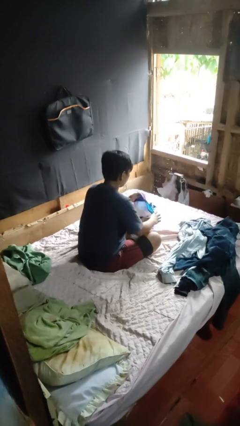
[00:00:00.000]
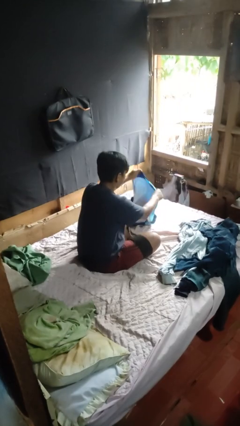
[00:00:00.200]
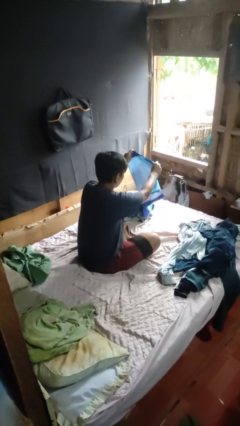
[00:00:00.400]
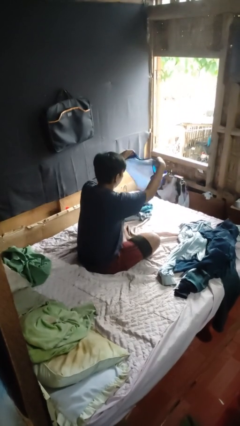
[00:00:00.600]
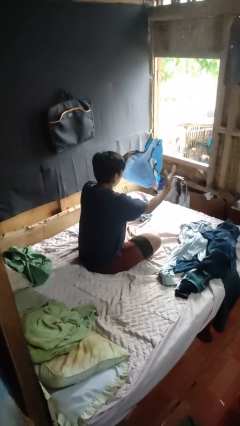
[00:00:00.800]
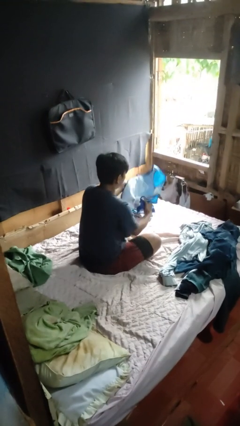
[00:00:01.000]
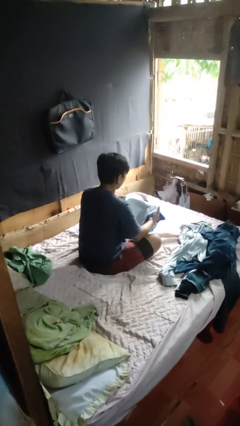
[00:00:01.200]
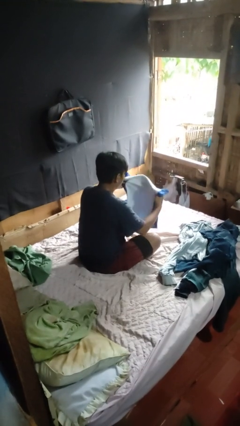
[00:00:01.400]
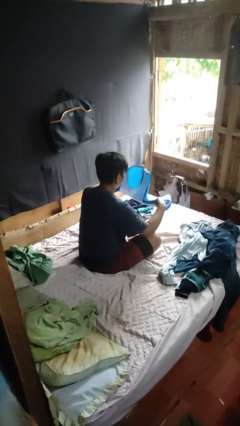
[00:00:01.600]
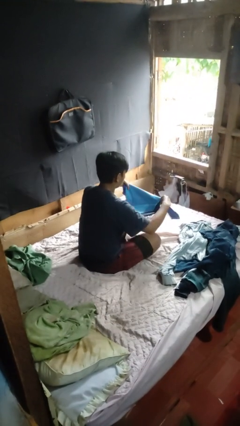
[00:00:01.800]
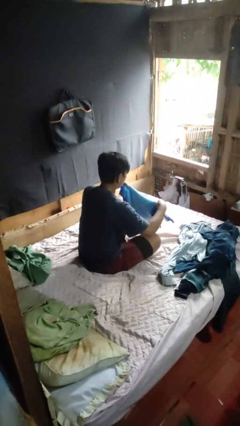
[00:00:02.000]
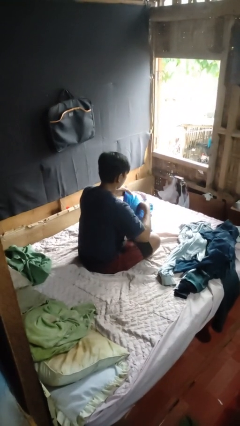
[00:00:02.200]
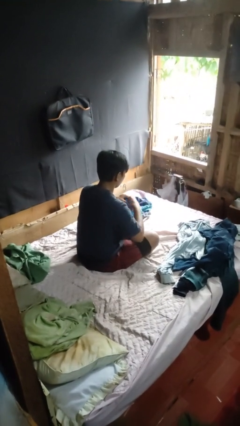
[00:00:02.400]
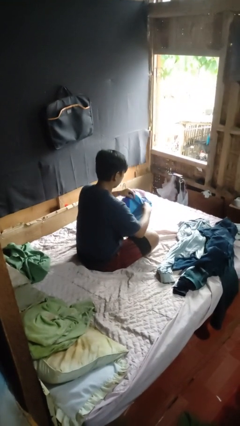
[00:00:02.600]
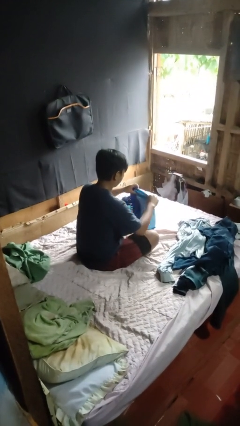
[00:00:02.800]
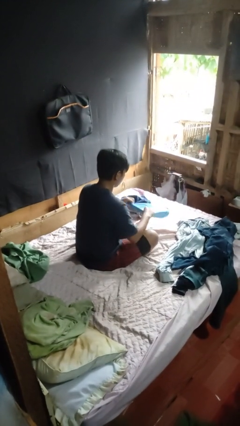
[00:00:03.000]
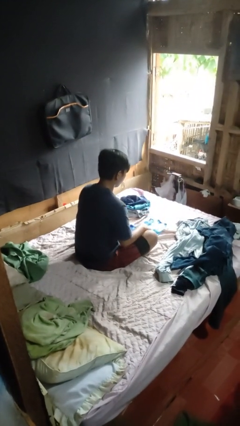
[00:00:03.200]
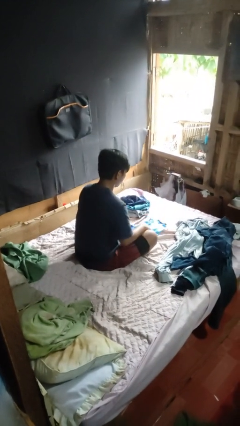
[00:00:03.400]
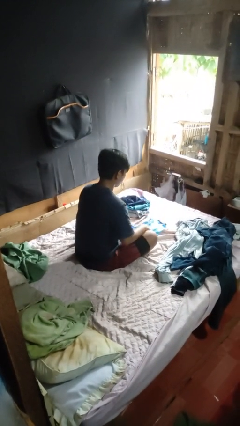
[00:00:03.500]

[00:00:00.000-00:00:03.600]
person folds shirt

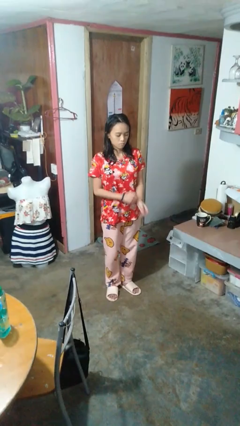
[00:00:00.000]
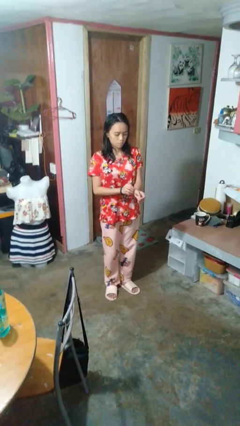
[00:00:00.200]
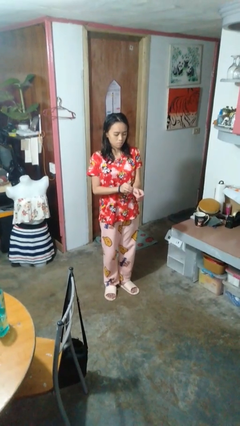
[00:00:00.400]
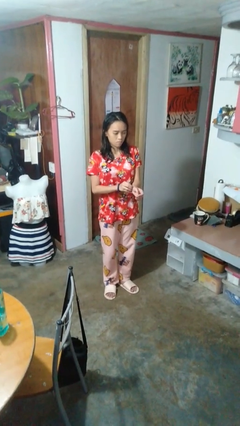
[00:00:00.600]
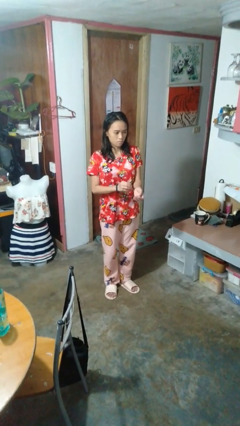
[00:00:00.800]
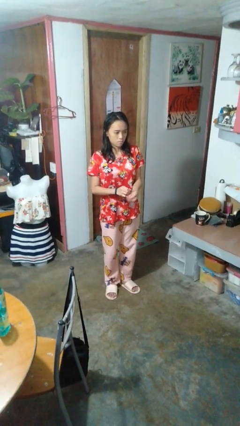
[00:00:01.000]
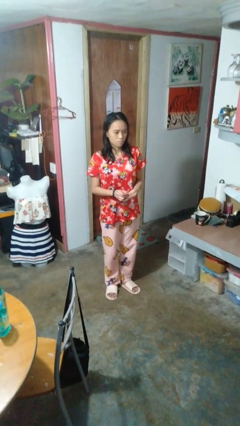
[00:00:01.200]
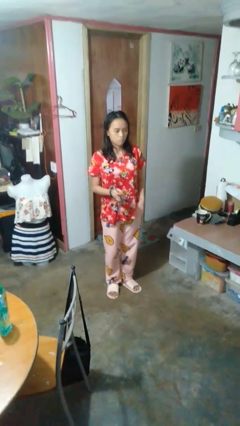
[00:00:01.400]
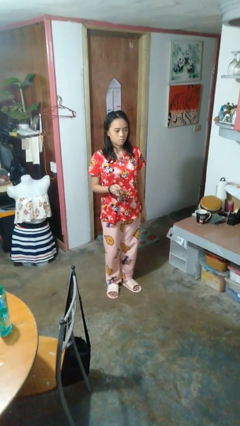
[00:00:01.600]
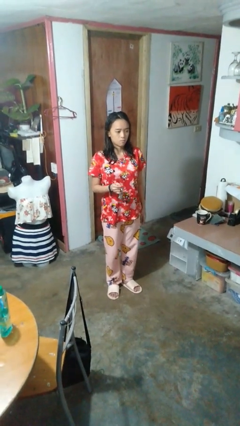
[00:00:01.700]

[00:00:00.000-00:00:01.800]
person takes off wristwatch

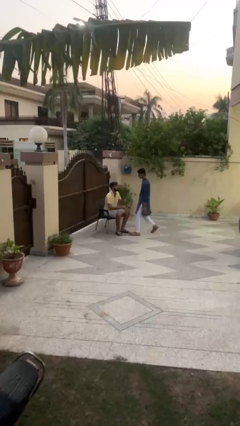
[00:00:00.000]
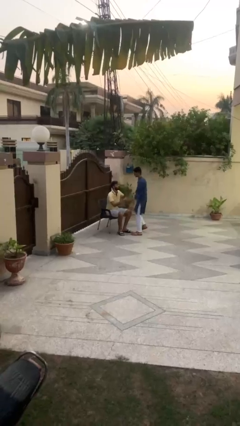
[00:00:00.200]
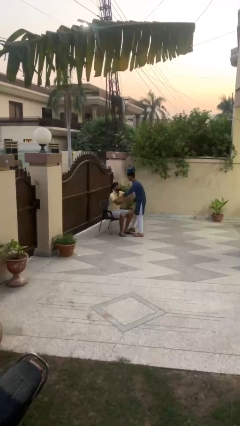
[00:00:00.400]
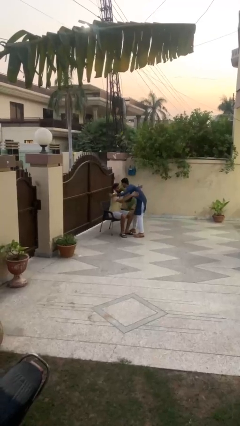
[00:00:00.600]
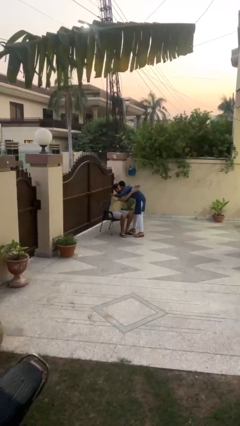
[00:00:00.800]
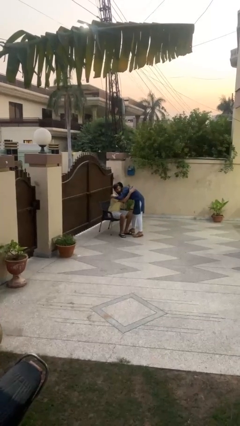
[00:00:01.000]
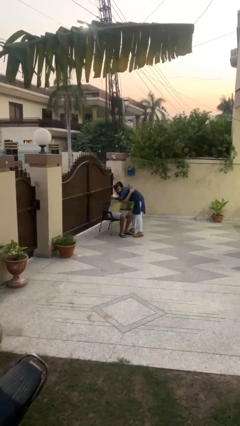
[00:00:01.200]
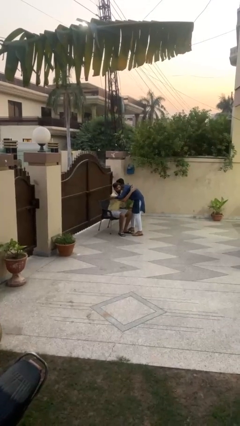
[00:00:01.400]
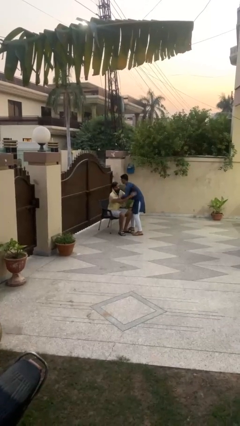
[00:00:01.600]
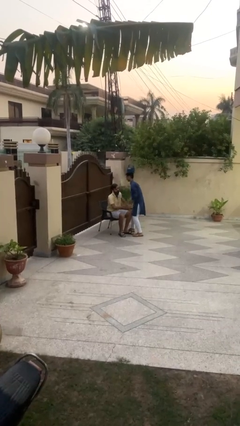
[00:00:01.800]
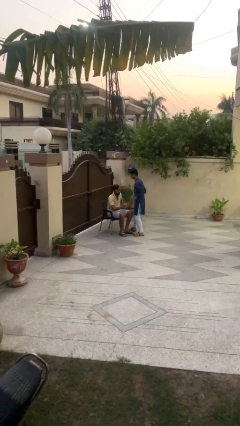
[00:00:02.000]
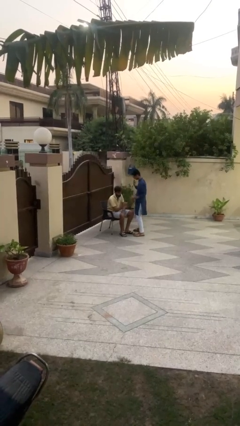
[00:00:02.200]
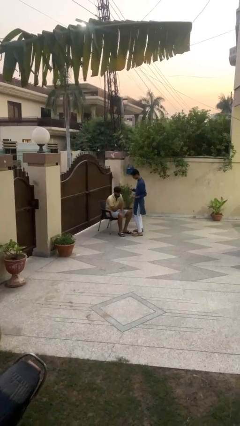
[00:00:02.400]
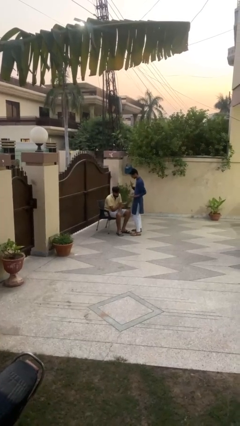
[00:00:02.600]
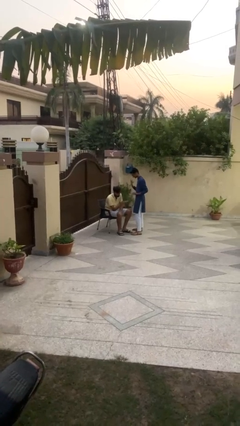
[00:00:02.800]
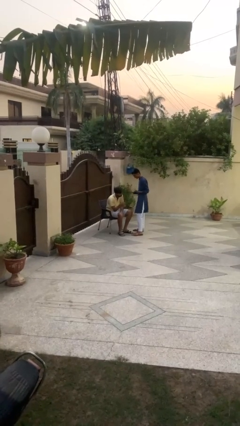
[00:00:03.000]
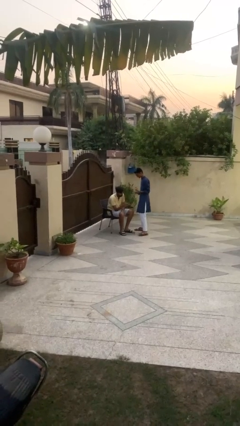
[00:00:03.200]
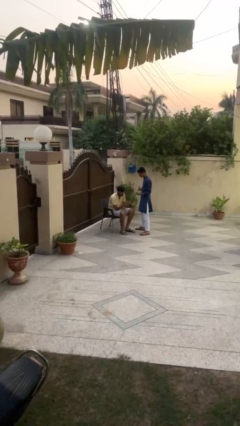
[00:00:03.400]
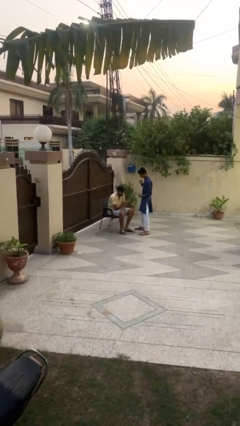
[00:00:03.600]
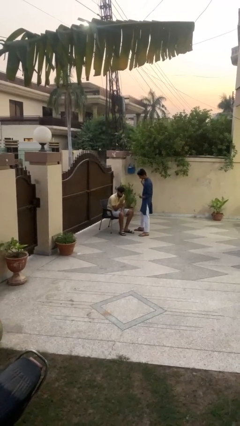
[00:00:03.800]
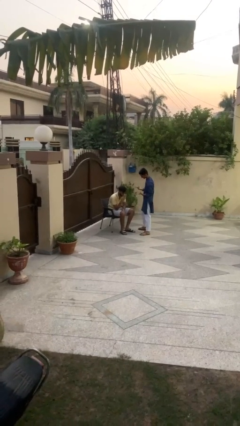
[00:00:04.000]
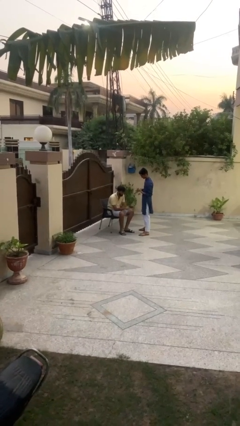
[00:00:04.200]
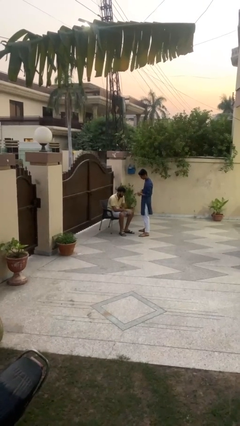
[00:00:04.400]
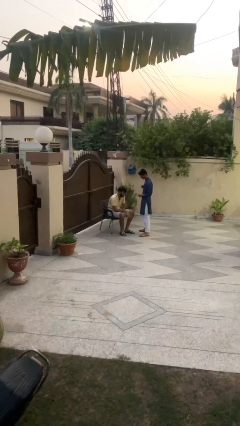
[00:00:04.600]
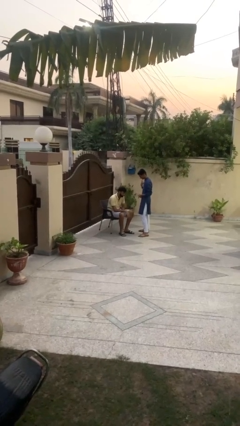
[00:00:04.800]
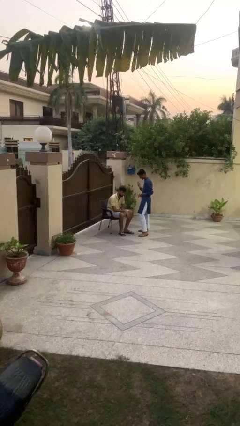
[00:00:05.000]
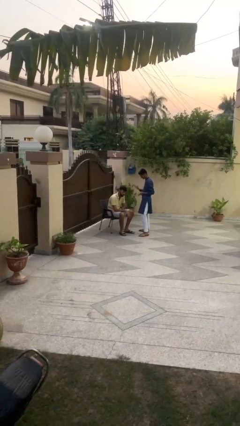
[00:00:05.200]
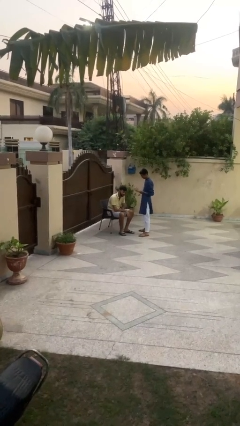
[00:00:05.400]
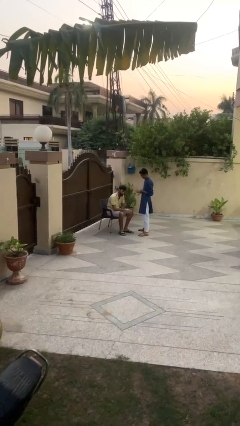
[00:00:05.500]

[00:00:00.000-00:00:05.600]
person embraces person

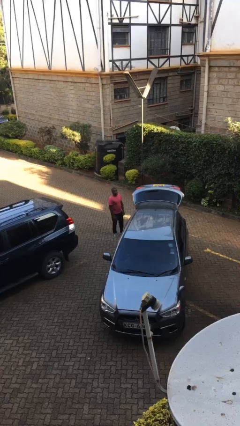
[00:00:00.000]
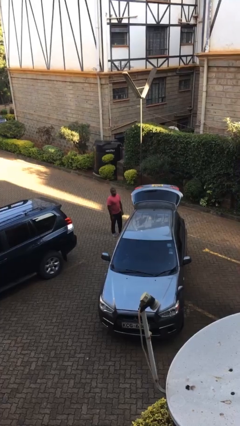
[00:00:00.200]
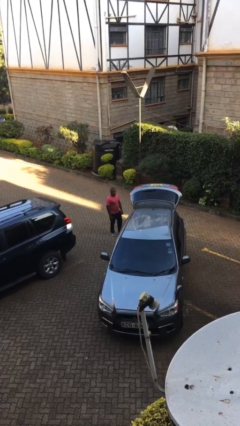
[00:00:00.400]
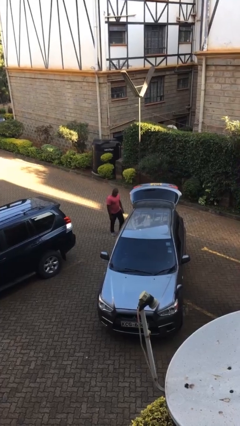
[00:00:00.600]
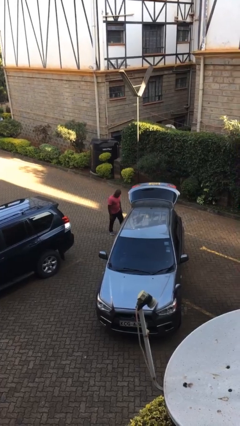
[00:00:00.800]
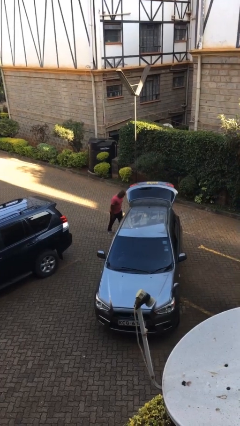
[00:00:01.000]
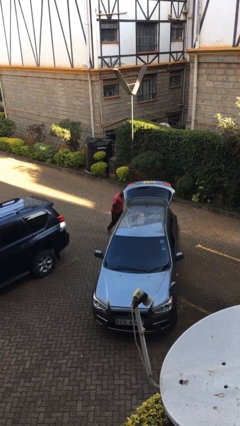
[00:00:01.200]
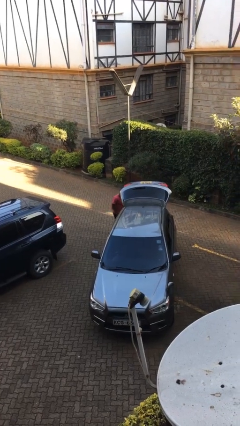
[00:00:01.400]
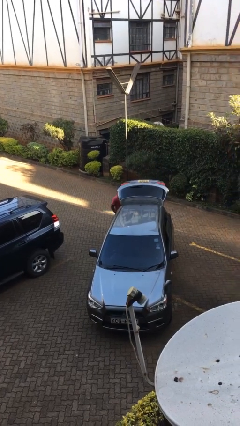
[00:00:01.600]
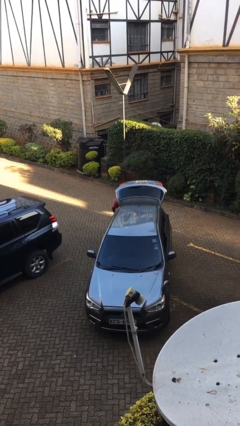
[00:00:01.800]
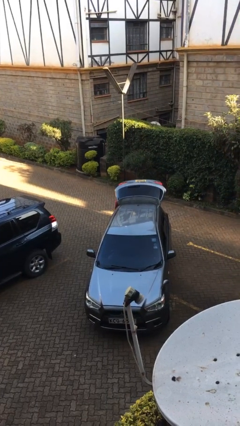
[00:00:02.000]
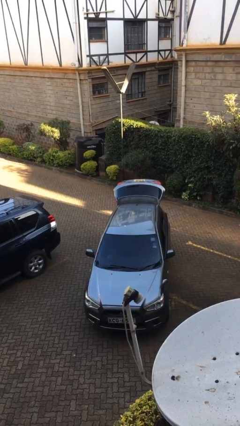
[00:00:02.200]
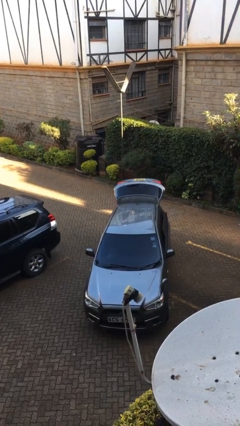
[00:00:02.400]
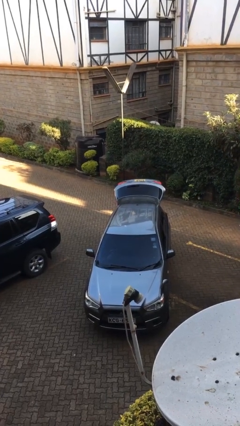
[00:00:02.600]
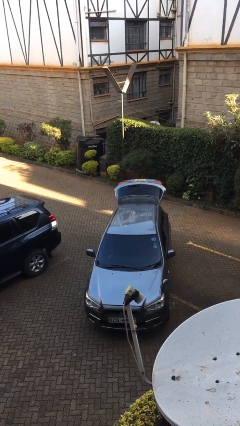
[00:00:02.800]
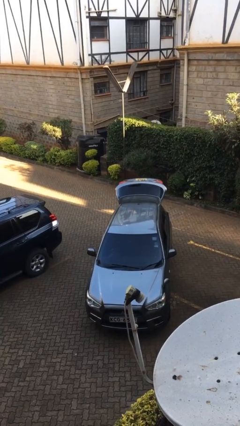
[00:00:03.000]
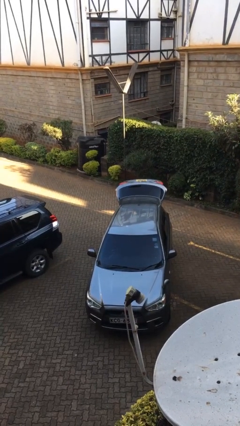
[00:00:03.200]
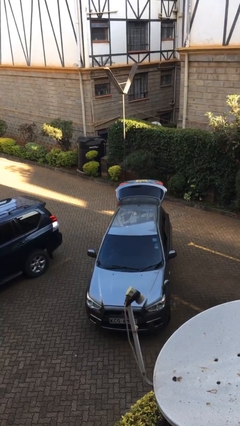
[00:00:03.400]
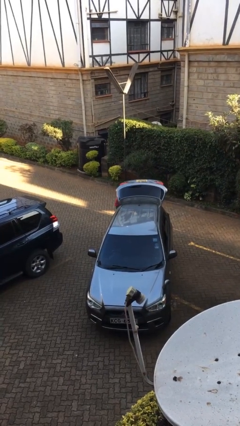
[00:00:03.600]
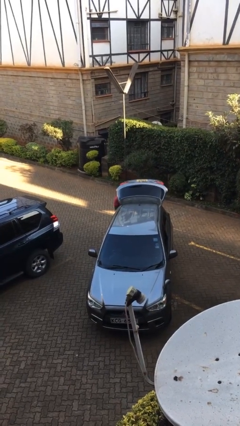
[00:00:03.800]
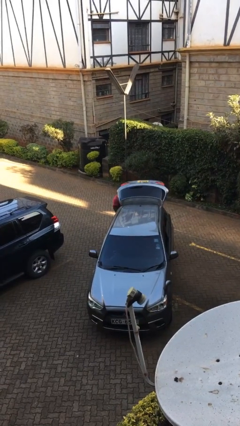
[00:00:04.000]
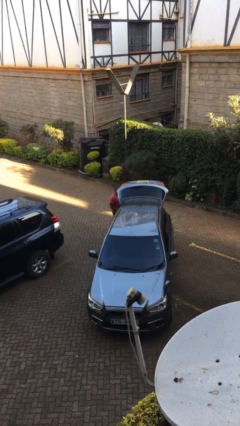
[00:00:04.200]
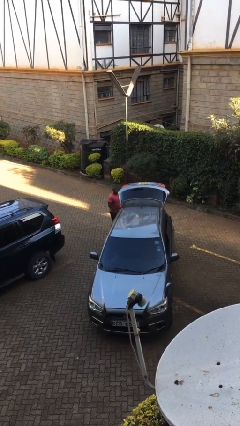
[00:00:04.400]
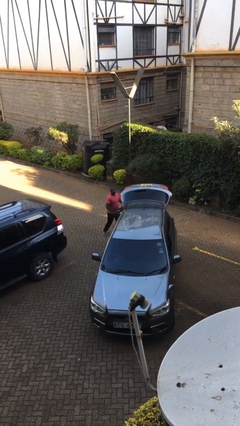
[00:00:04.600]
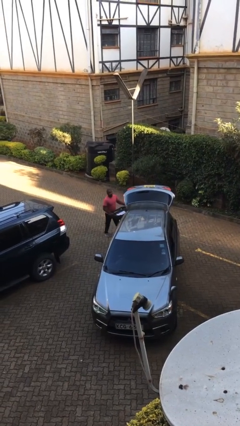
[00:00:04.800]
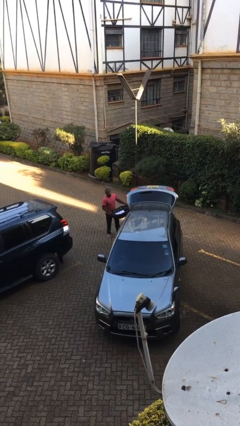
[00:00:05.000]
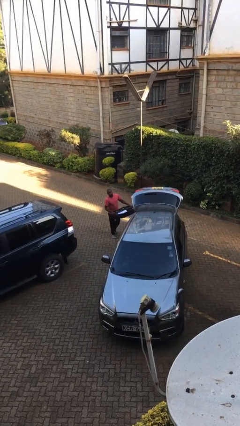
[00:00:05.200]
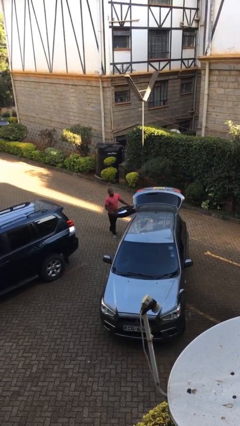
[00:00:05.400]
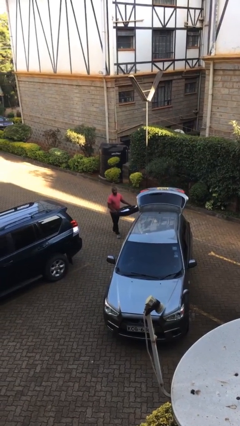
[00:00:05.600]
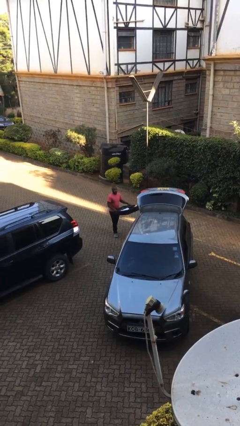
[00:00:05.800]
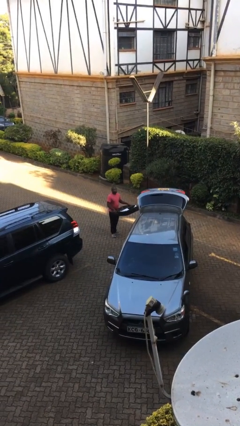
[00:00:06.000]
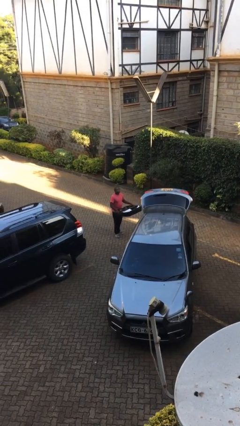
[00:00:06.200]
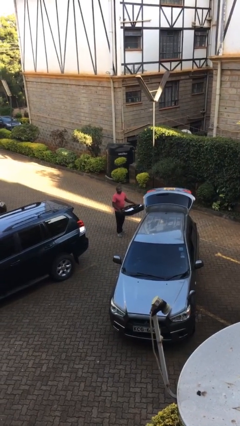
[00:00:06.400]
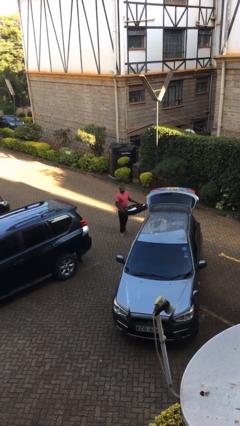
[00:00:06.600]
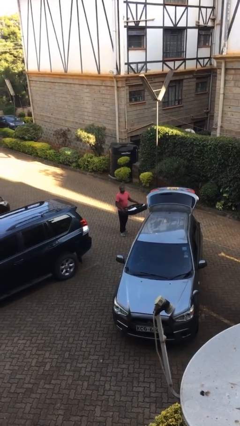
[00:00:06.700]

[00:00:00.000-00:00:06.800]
person unloads car
